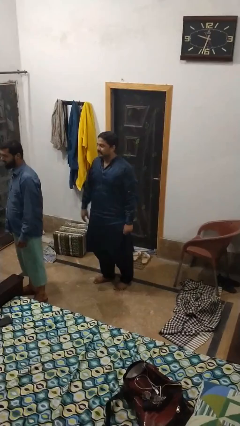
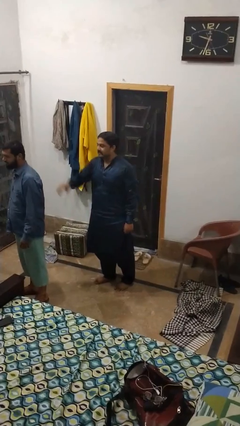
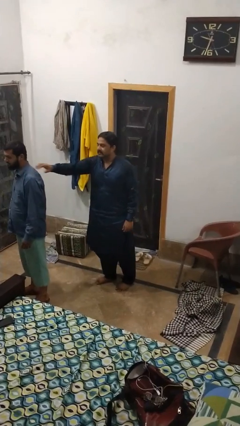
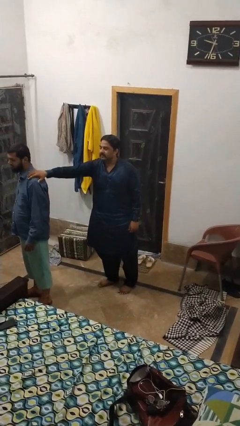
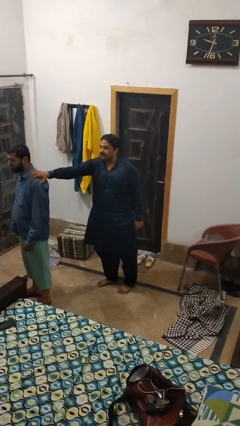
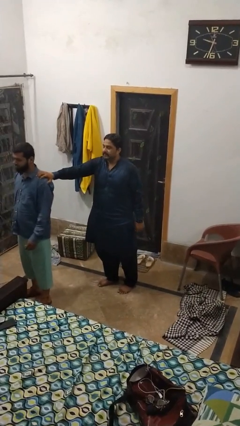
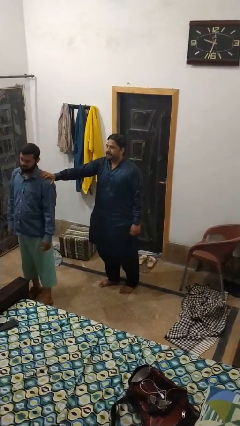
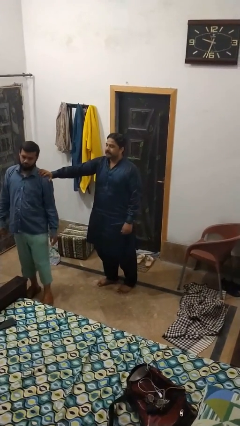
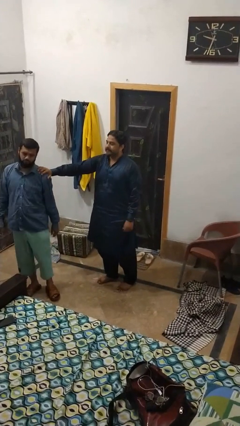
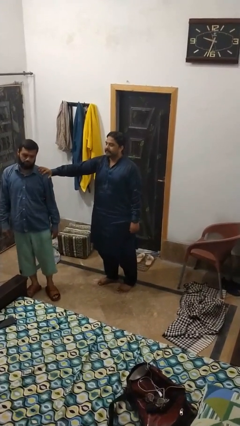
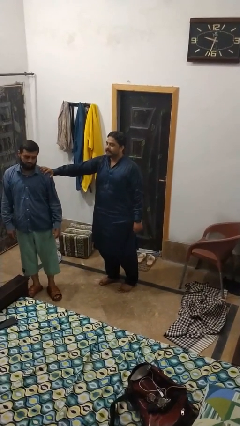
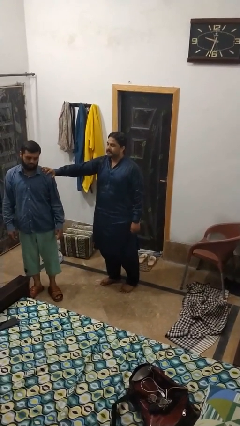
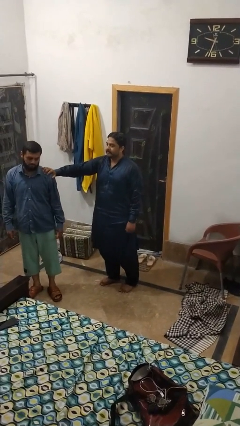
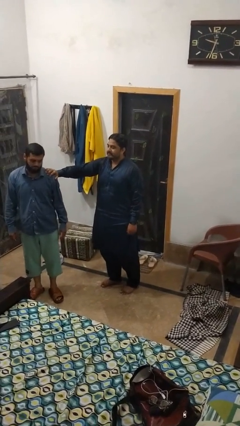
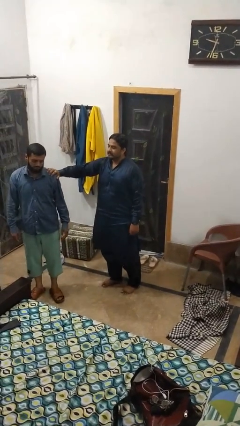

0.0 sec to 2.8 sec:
person grabs person by shoulder

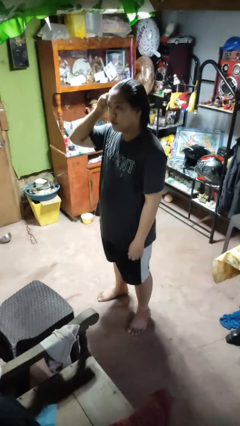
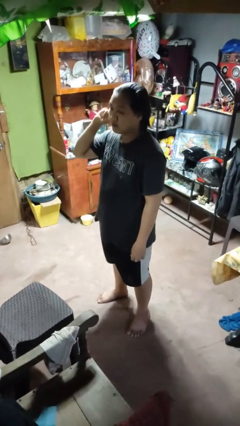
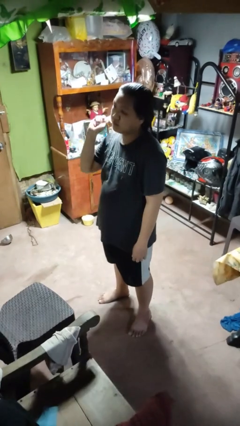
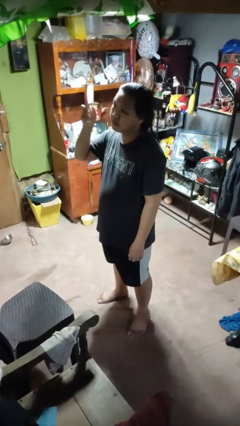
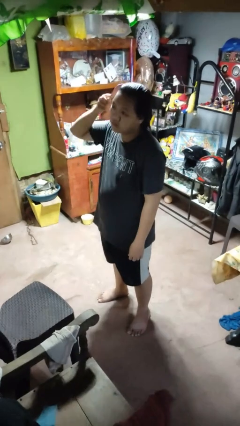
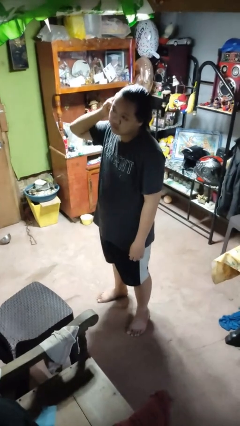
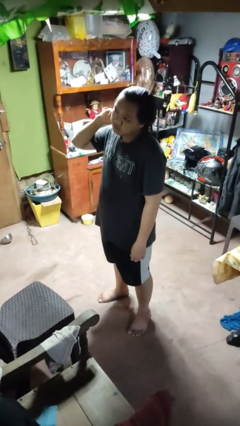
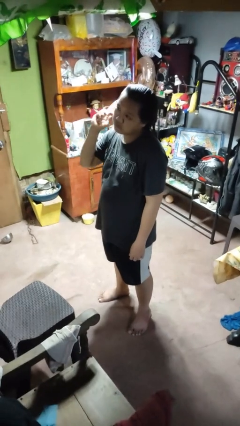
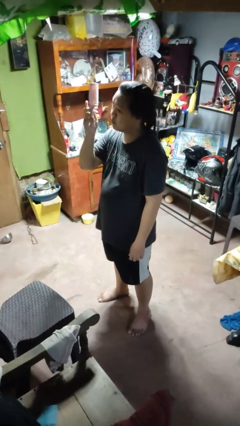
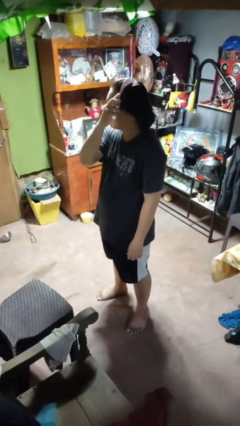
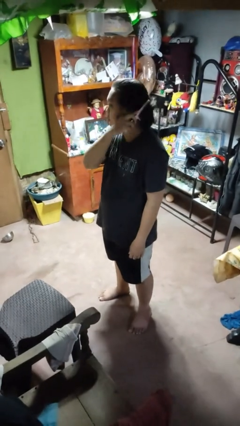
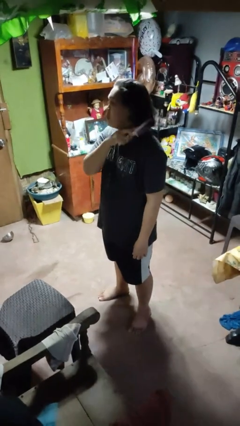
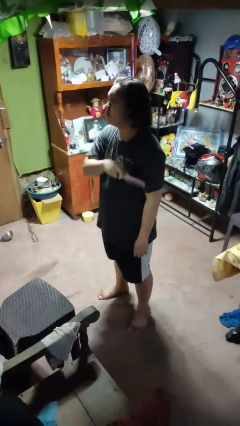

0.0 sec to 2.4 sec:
person brushes hair

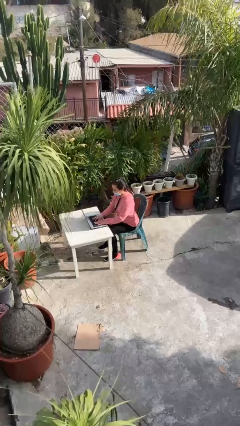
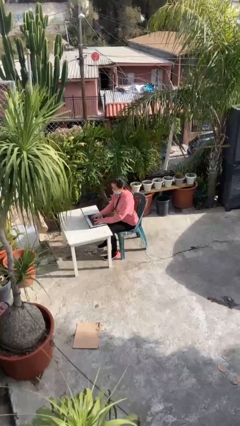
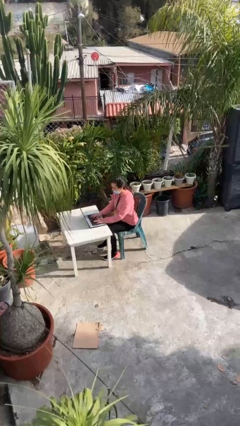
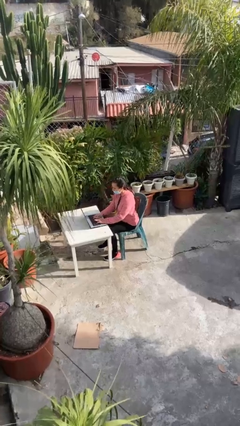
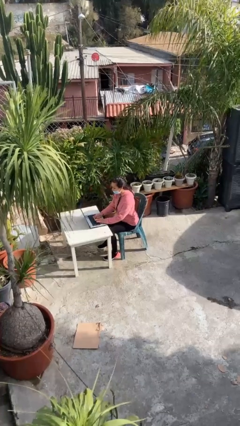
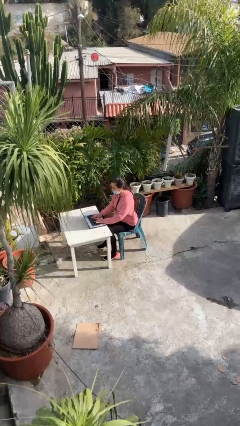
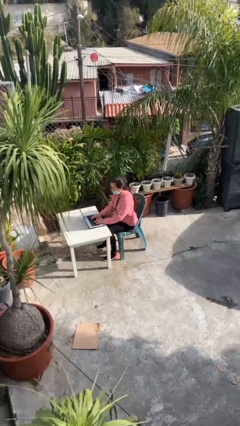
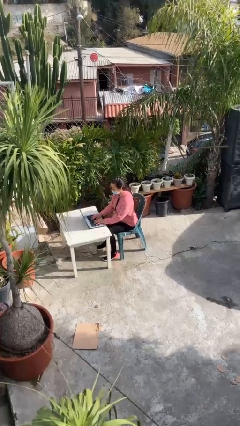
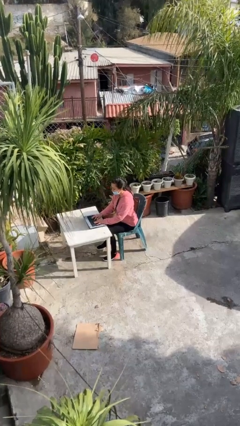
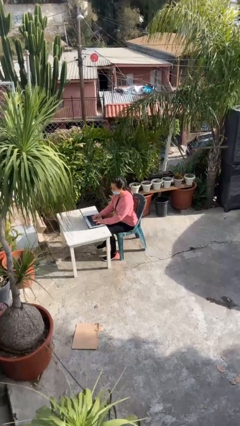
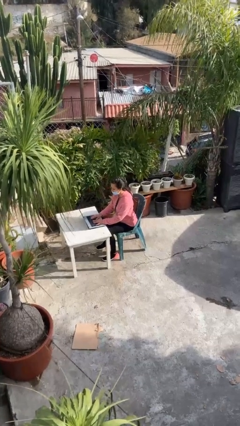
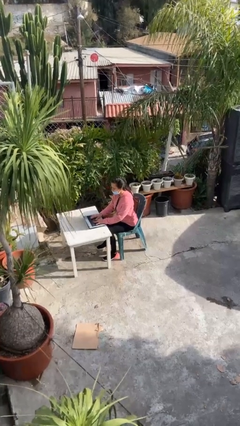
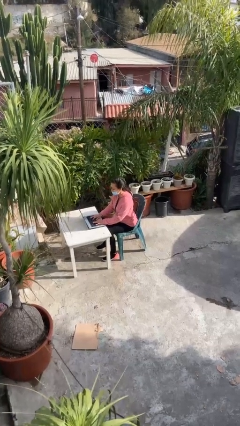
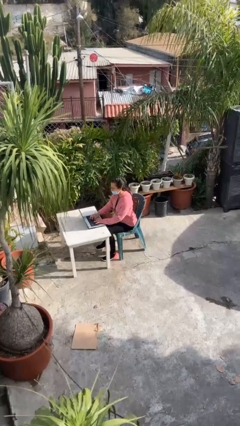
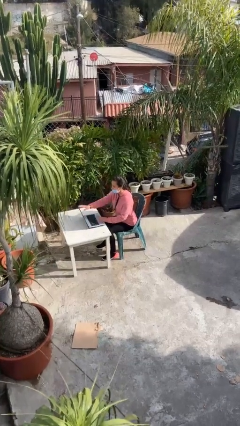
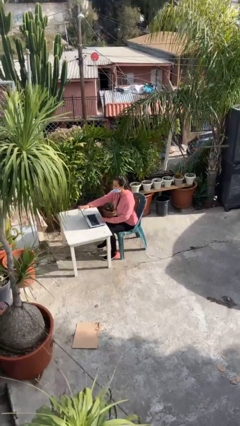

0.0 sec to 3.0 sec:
person interacts with laptop

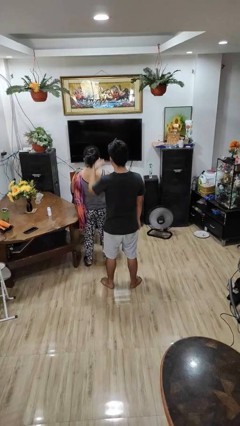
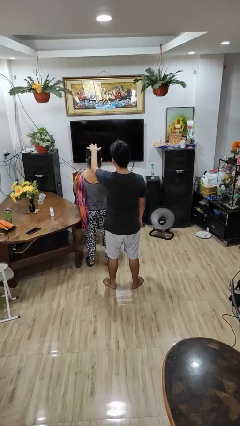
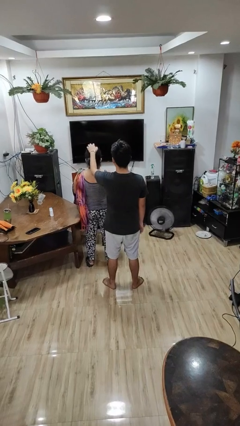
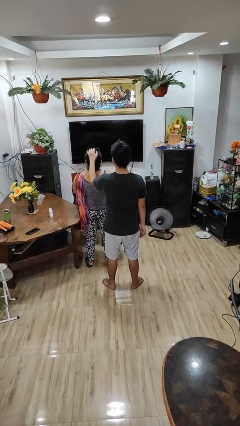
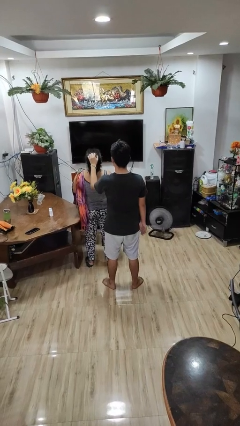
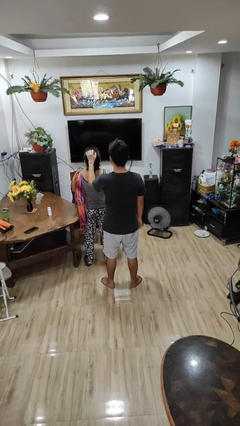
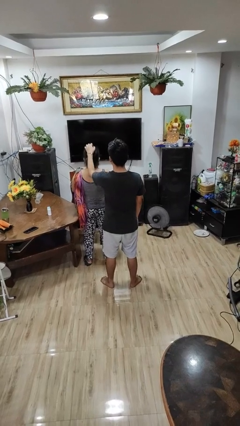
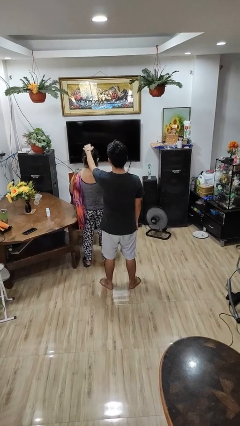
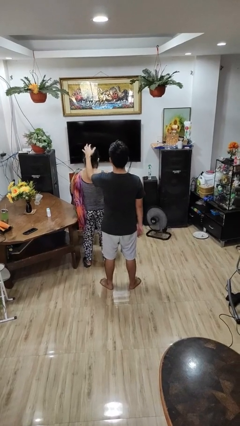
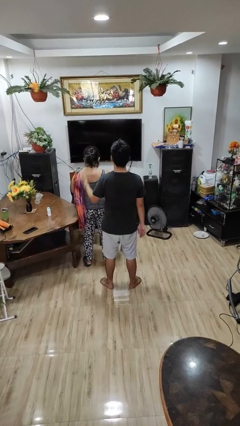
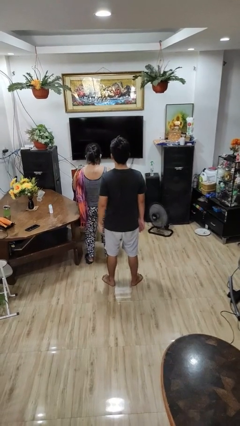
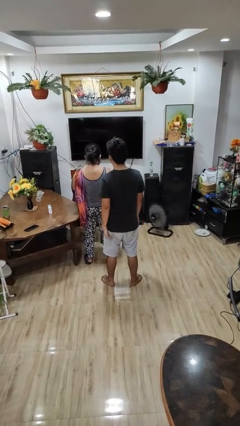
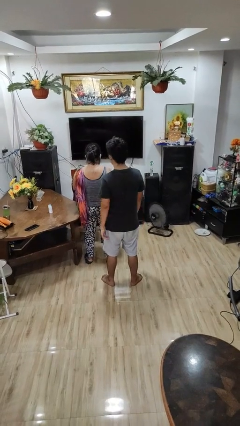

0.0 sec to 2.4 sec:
person grabs person by hair

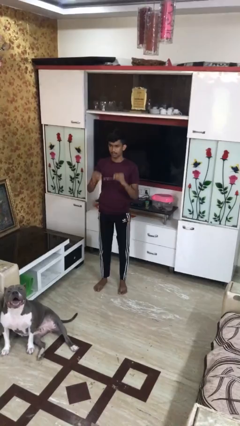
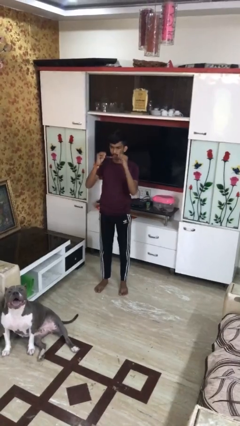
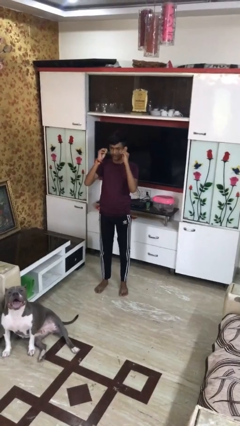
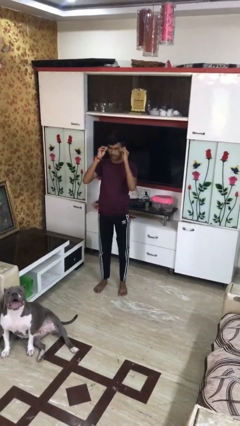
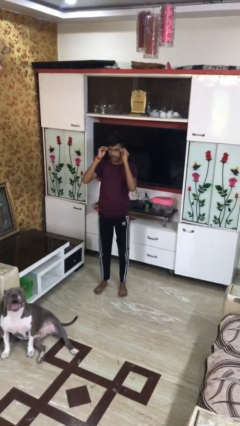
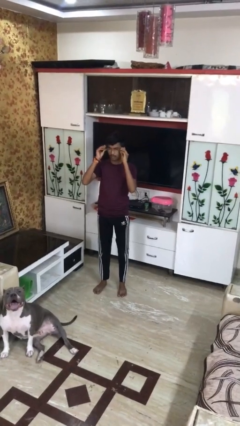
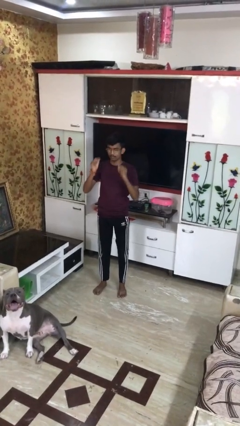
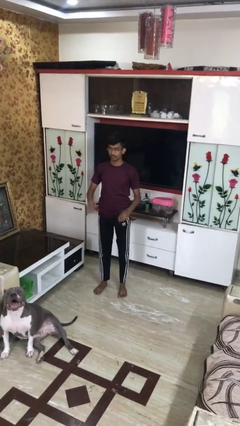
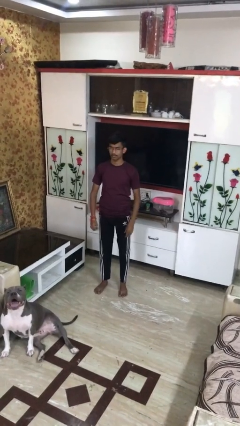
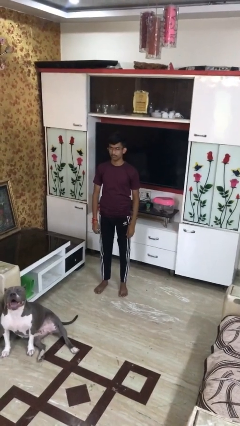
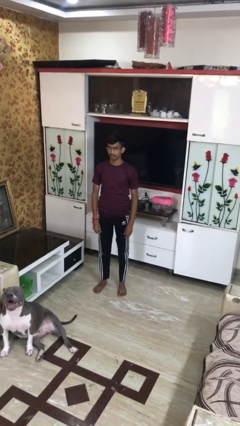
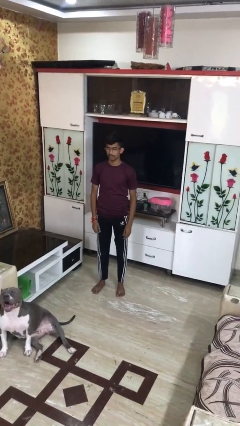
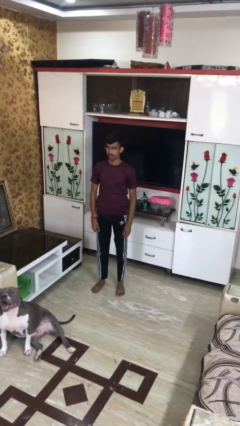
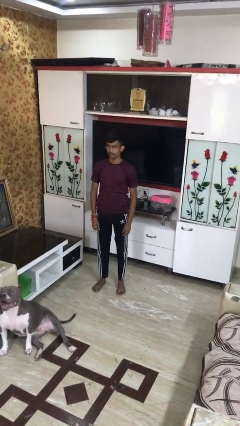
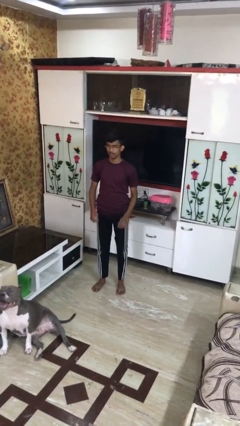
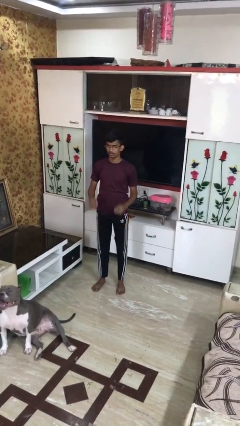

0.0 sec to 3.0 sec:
person puts on glasses

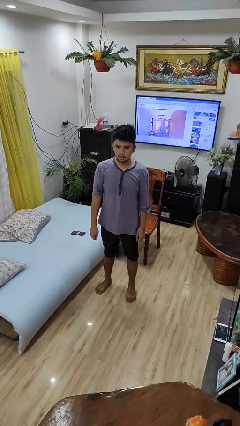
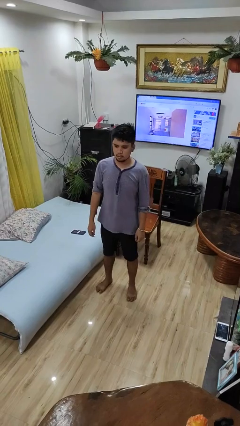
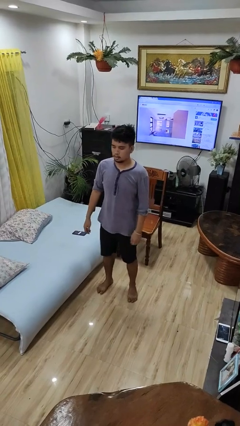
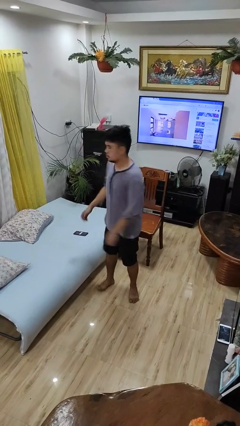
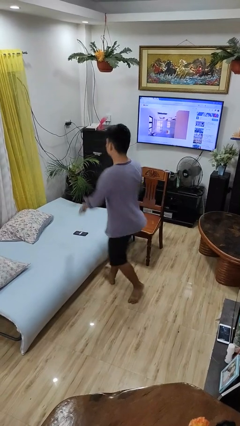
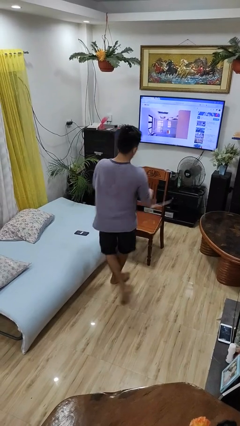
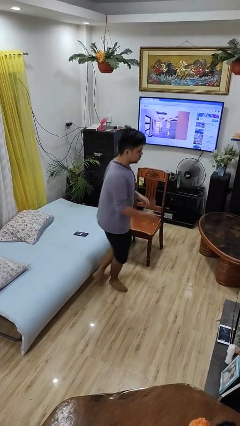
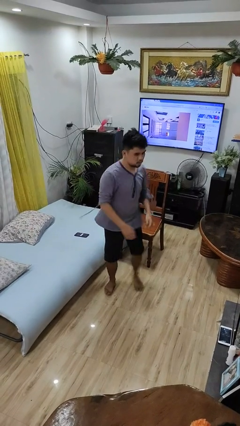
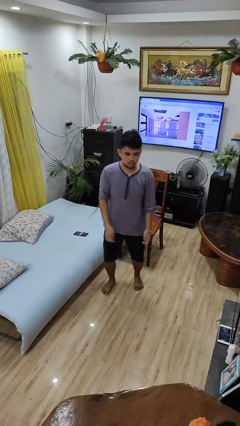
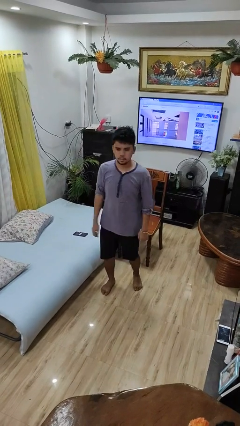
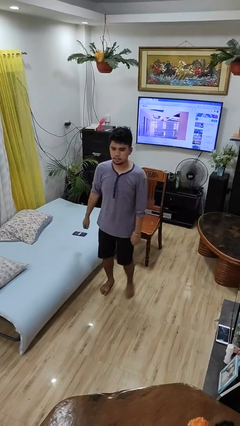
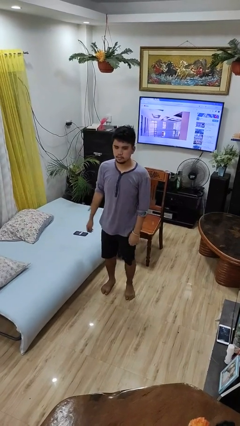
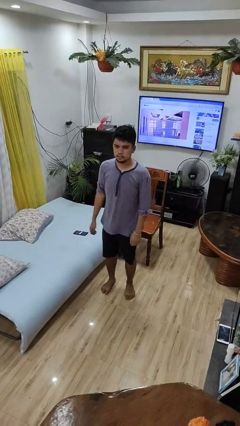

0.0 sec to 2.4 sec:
person twirls
